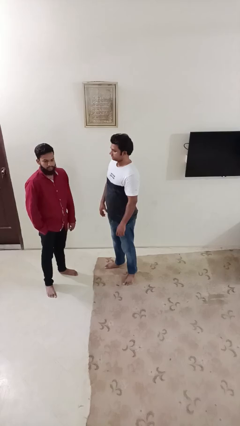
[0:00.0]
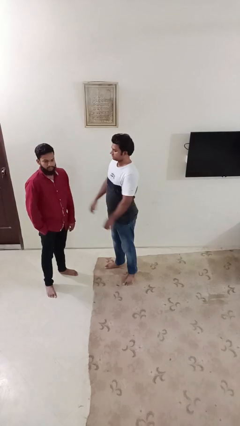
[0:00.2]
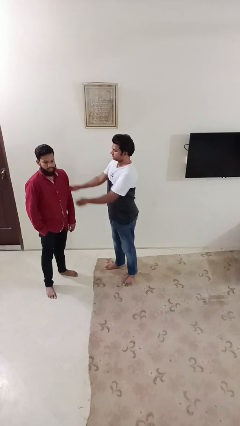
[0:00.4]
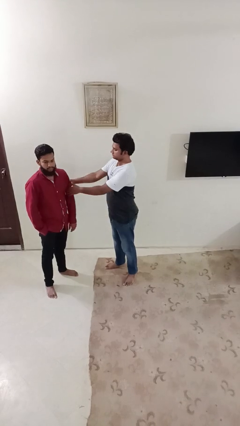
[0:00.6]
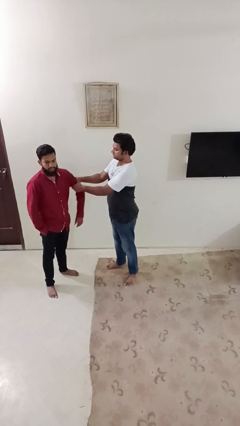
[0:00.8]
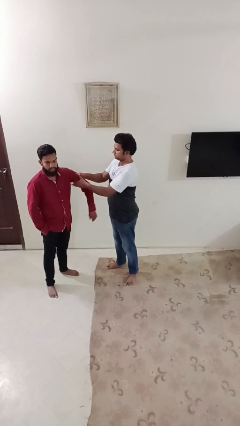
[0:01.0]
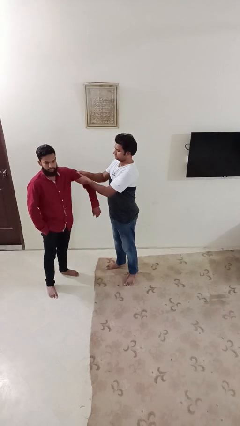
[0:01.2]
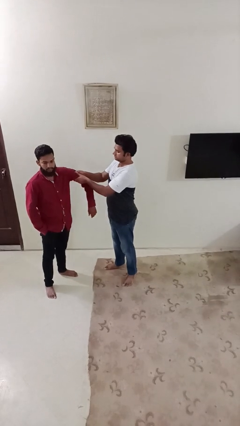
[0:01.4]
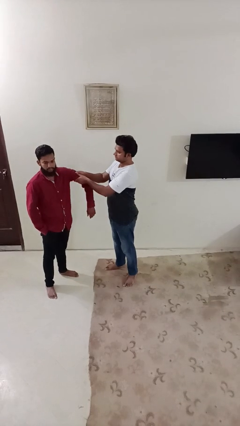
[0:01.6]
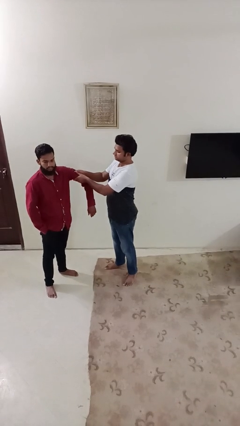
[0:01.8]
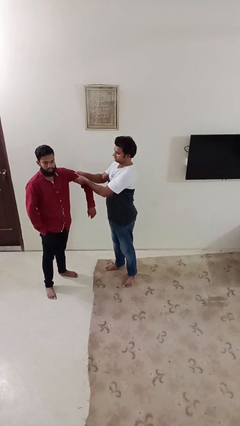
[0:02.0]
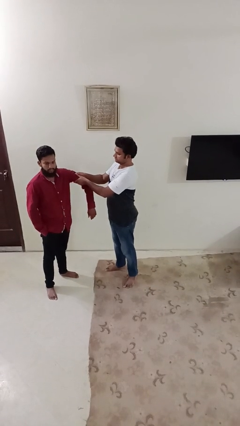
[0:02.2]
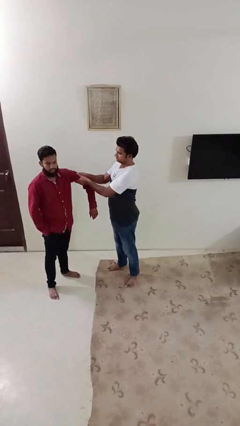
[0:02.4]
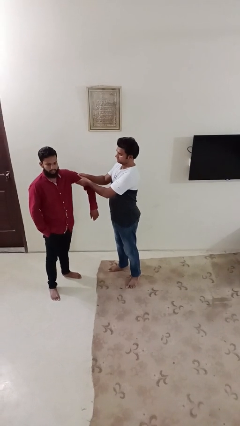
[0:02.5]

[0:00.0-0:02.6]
person grabs person by bicep

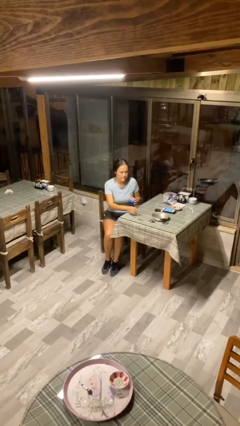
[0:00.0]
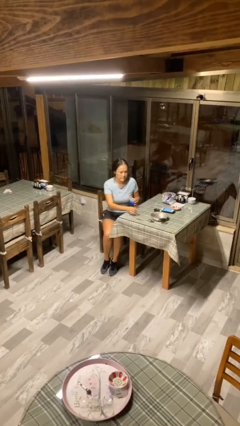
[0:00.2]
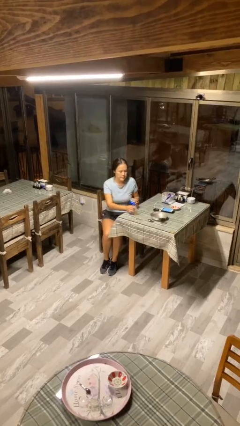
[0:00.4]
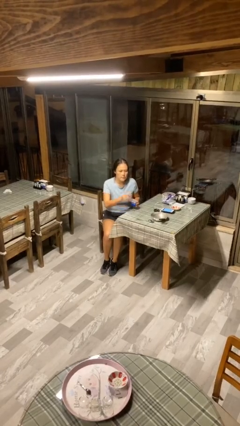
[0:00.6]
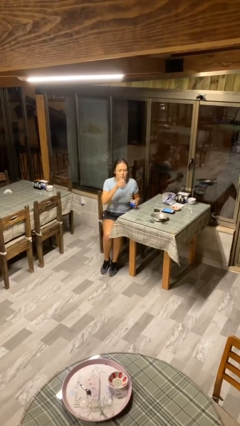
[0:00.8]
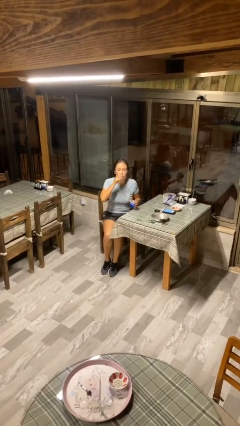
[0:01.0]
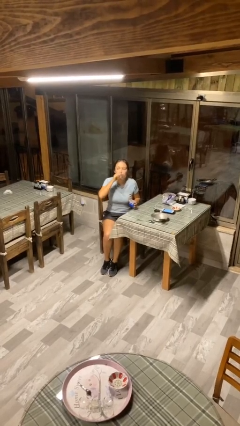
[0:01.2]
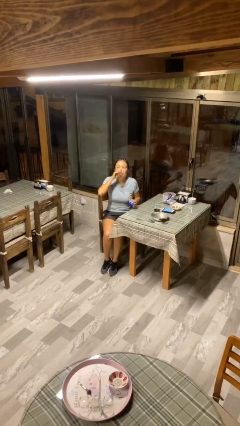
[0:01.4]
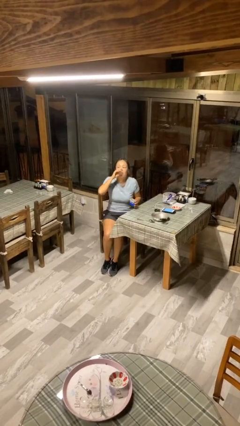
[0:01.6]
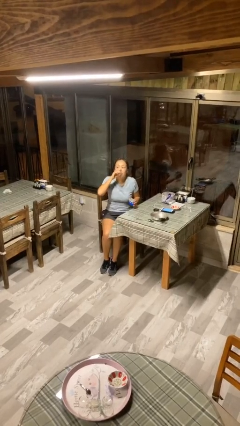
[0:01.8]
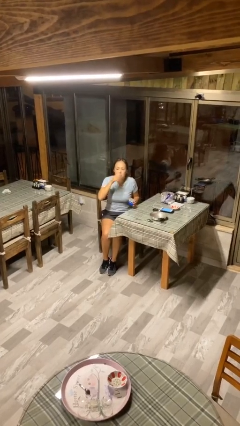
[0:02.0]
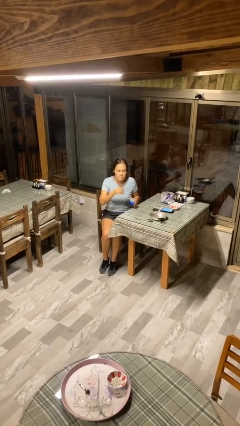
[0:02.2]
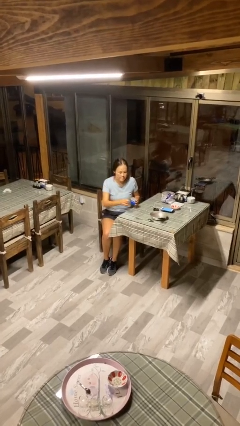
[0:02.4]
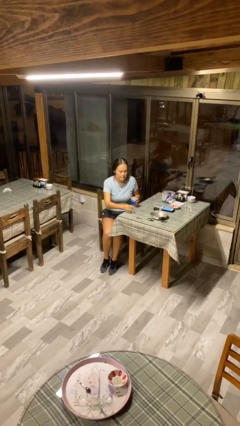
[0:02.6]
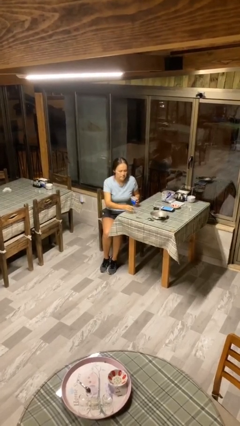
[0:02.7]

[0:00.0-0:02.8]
person drinks from cup

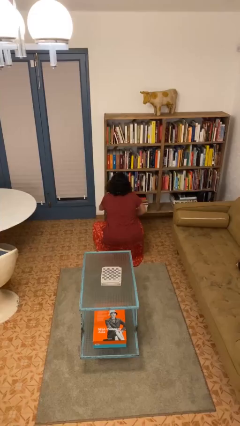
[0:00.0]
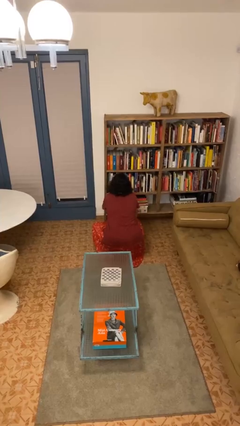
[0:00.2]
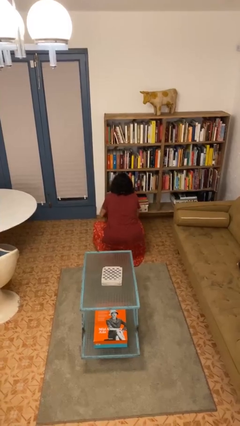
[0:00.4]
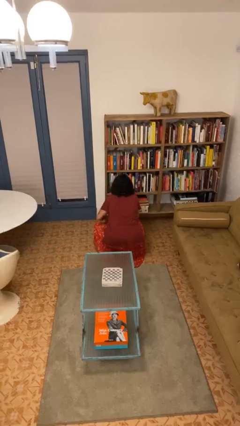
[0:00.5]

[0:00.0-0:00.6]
person stands up

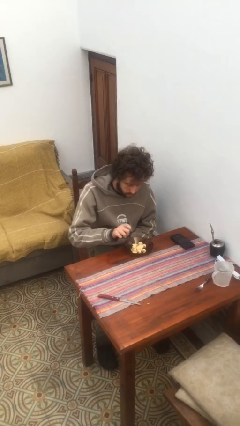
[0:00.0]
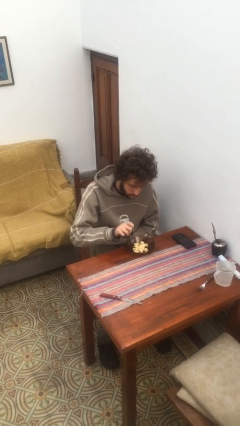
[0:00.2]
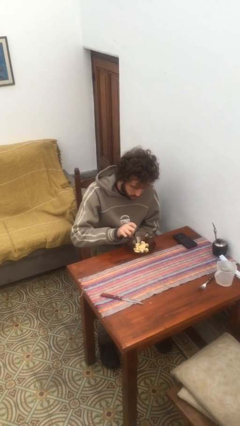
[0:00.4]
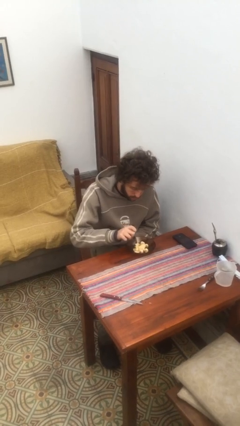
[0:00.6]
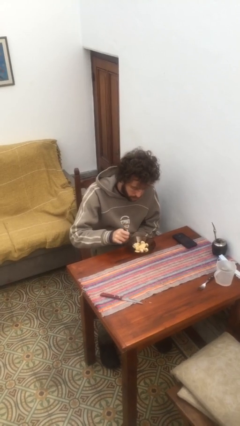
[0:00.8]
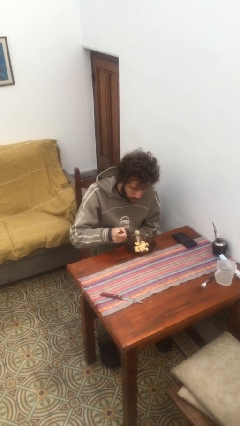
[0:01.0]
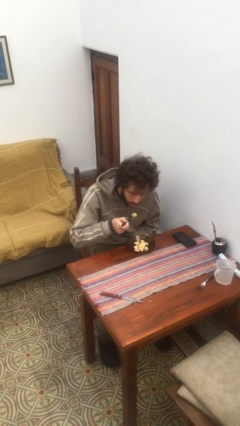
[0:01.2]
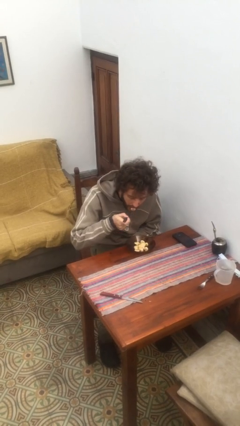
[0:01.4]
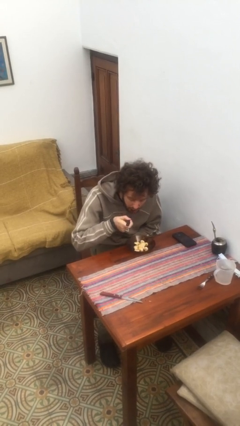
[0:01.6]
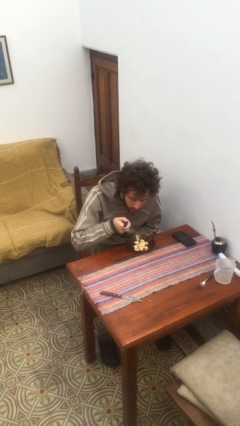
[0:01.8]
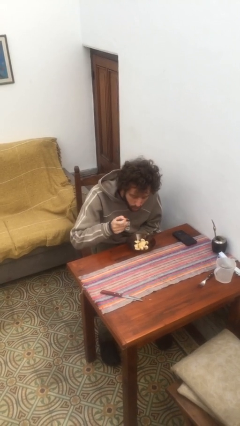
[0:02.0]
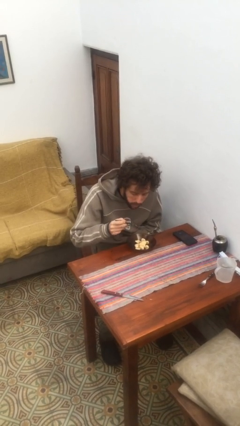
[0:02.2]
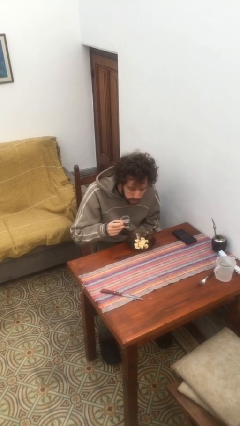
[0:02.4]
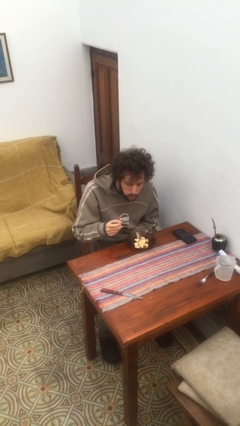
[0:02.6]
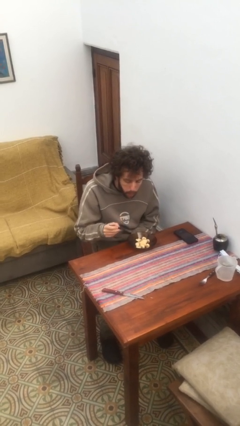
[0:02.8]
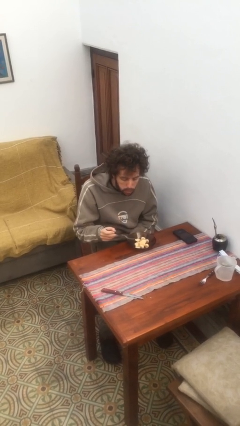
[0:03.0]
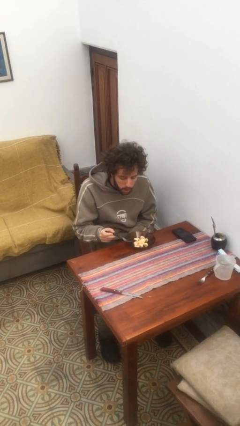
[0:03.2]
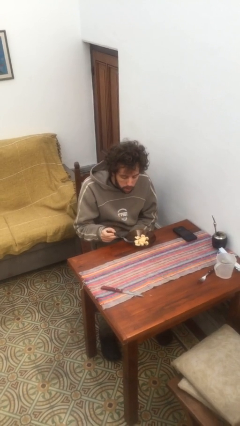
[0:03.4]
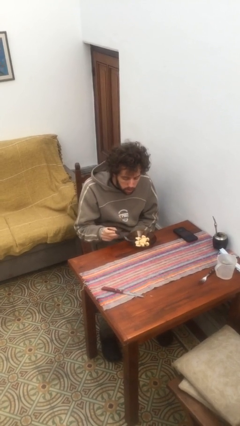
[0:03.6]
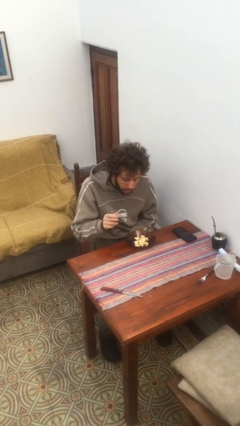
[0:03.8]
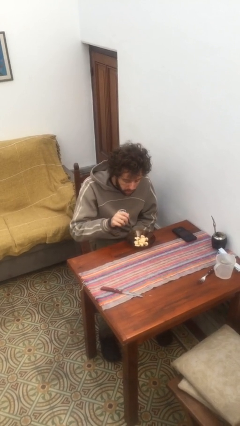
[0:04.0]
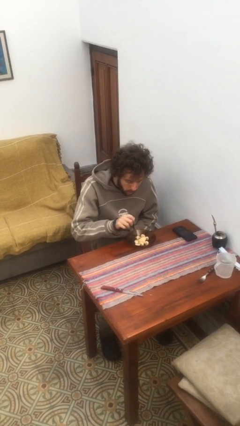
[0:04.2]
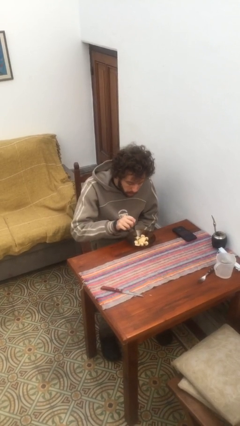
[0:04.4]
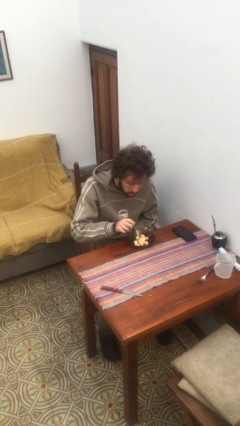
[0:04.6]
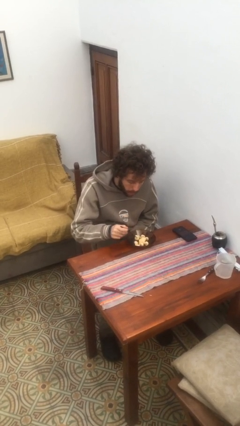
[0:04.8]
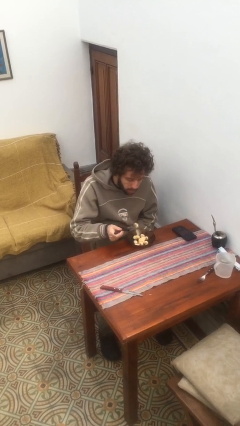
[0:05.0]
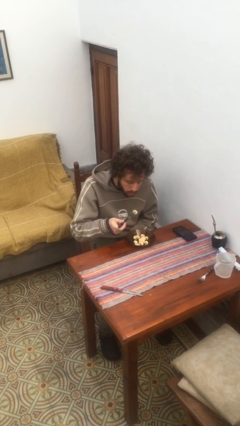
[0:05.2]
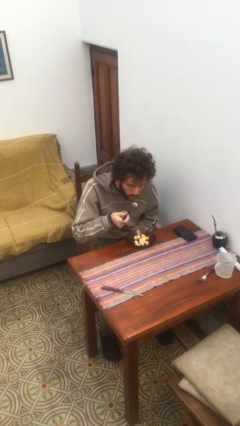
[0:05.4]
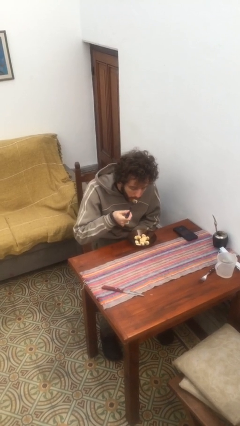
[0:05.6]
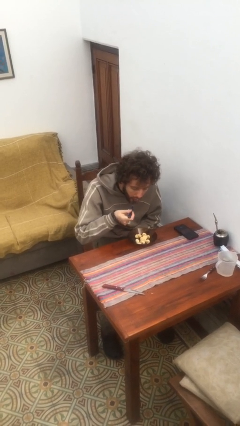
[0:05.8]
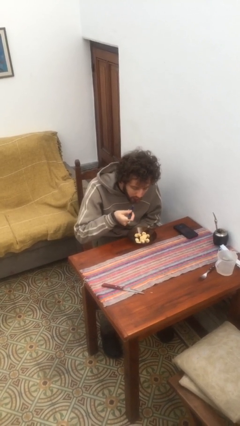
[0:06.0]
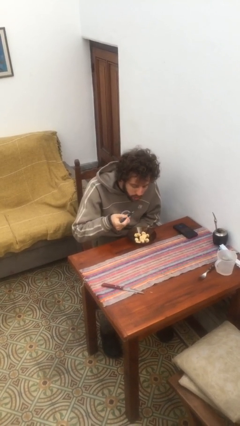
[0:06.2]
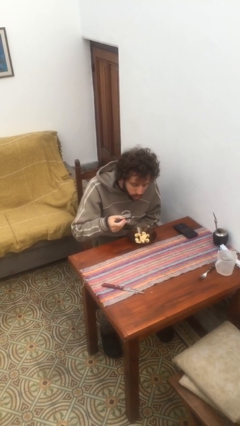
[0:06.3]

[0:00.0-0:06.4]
person eats with utensil

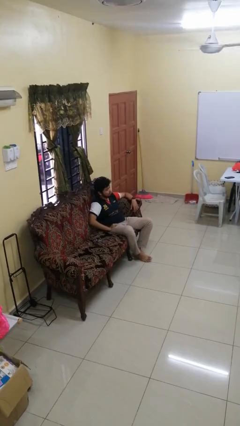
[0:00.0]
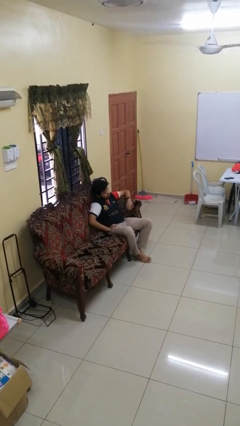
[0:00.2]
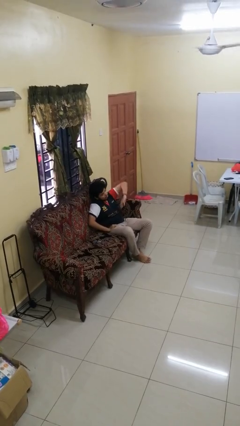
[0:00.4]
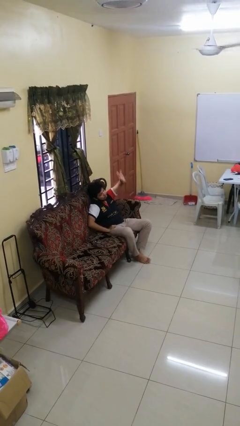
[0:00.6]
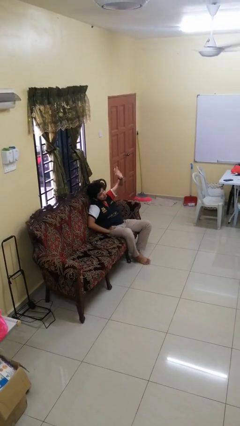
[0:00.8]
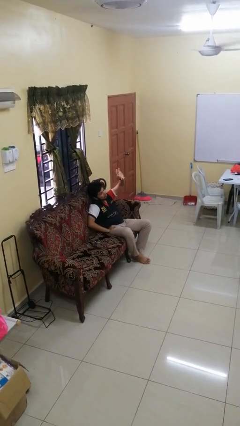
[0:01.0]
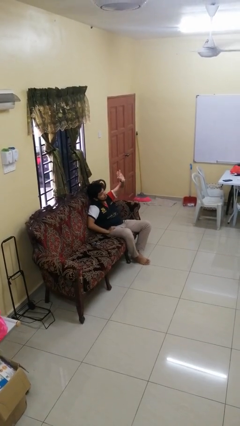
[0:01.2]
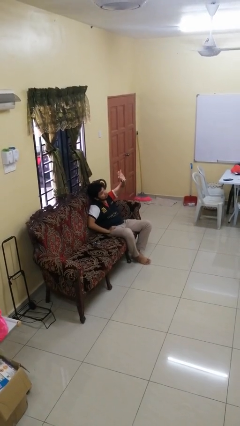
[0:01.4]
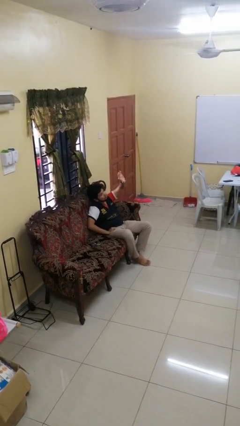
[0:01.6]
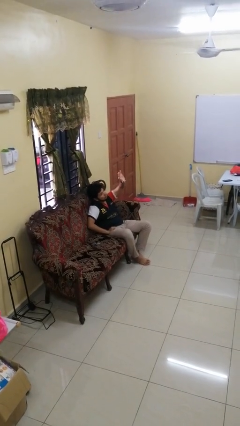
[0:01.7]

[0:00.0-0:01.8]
person gestures swipe up

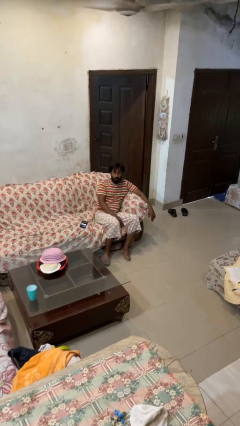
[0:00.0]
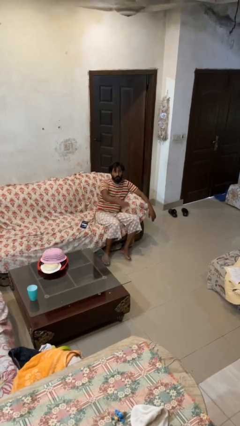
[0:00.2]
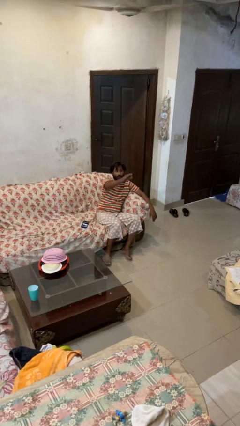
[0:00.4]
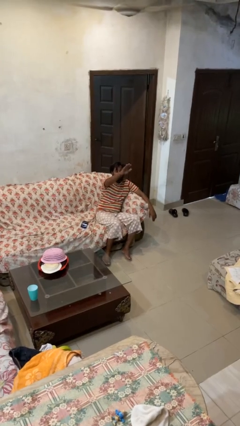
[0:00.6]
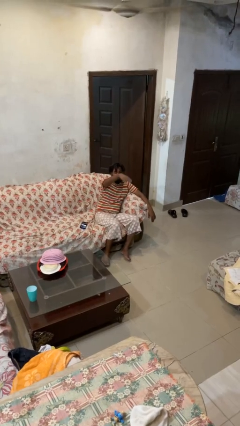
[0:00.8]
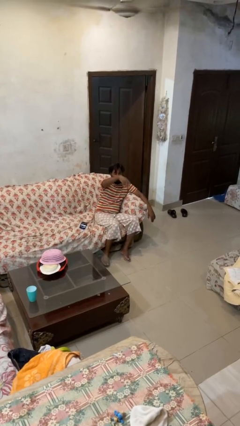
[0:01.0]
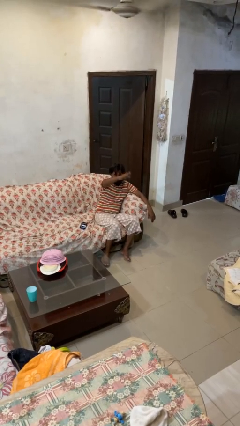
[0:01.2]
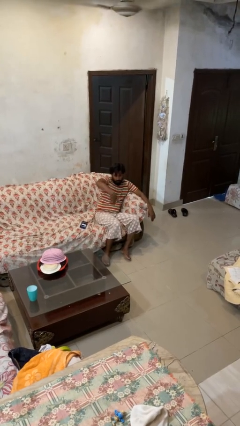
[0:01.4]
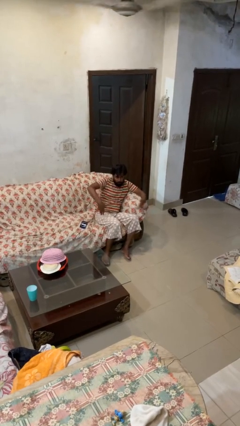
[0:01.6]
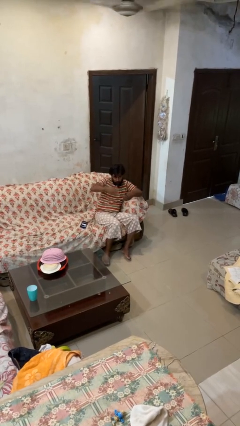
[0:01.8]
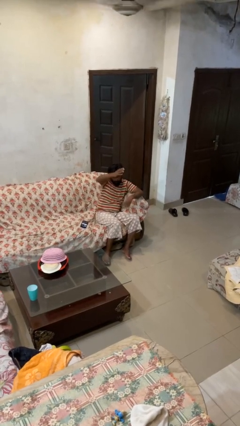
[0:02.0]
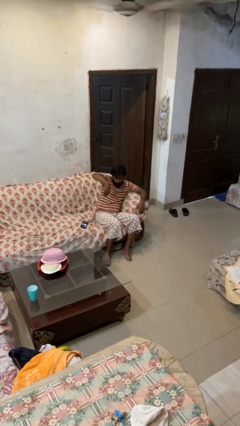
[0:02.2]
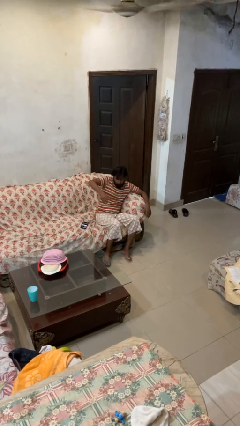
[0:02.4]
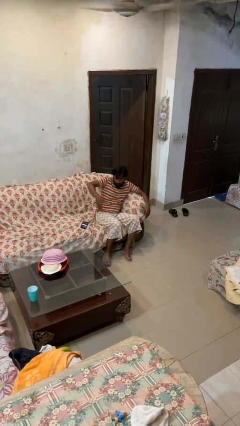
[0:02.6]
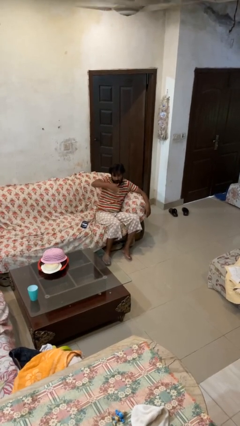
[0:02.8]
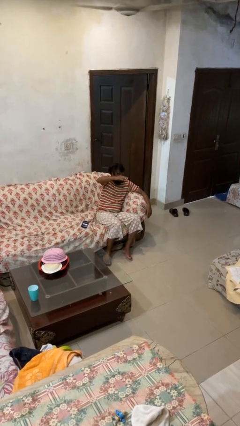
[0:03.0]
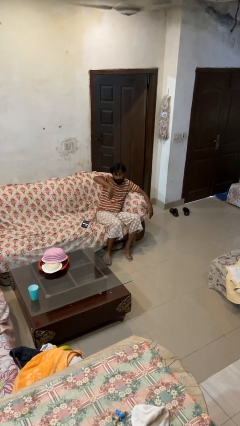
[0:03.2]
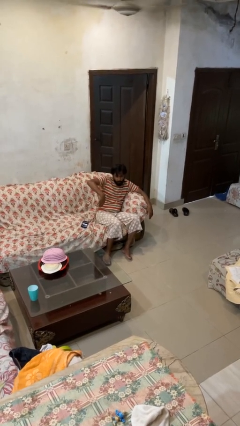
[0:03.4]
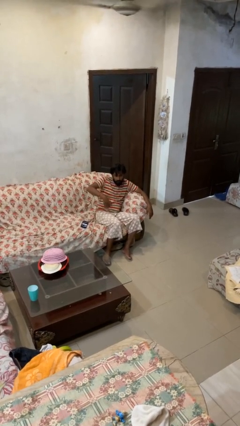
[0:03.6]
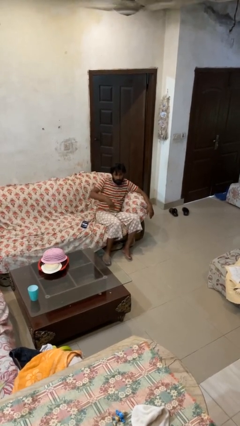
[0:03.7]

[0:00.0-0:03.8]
person gestures come here
